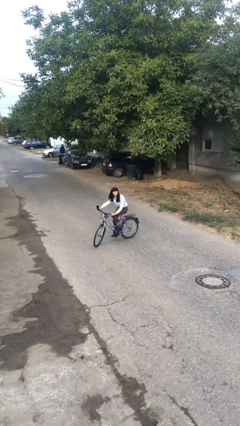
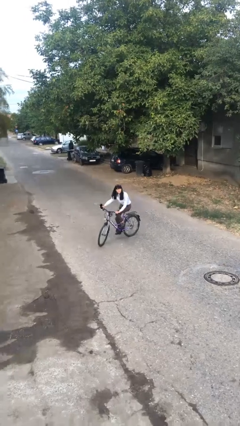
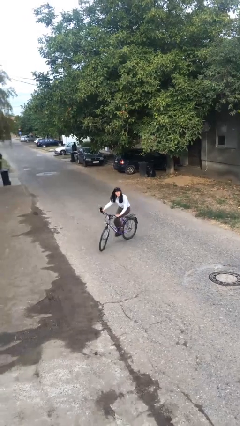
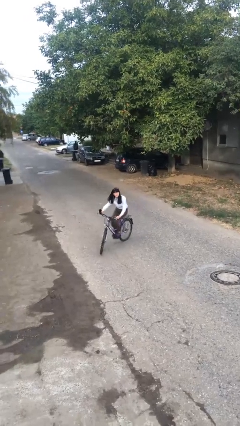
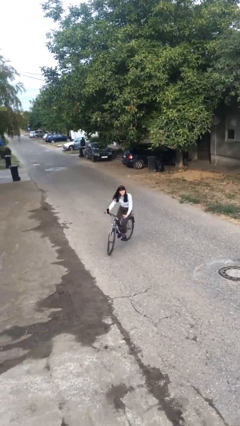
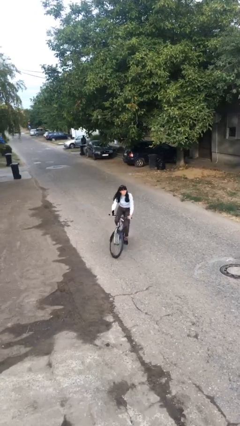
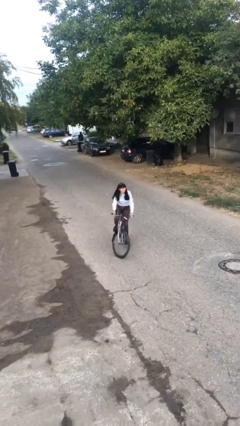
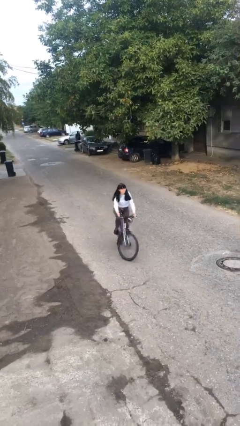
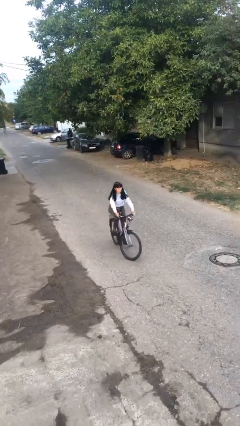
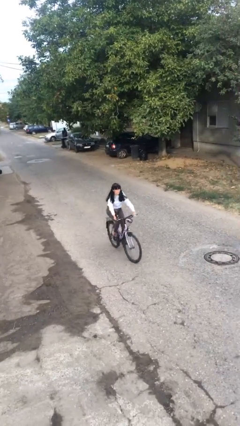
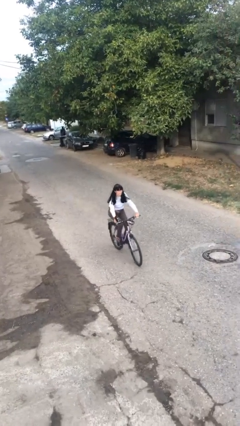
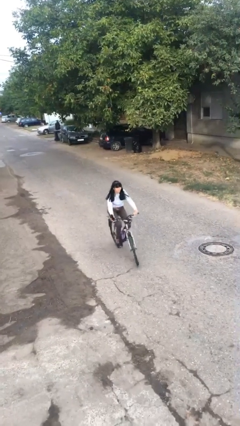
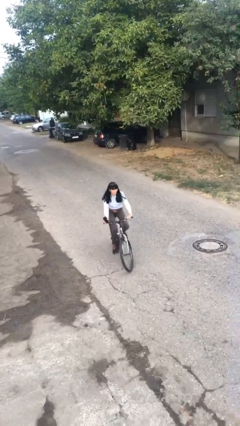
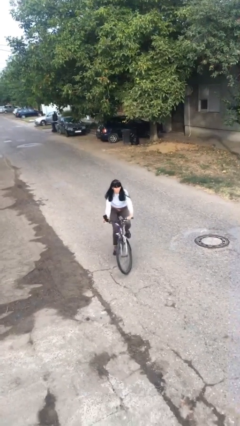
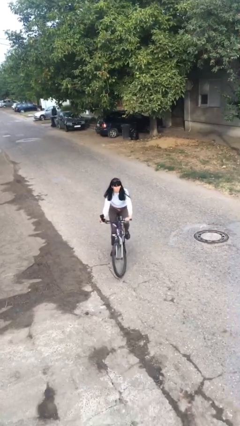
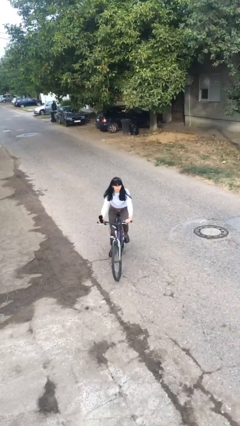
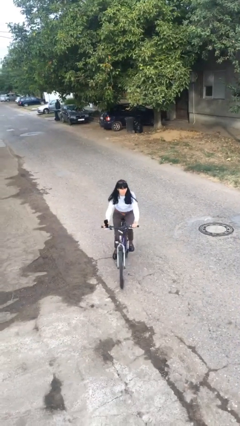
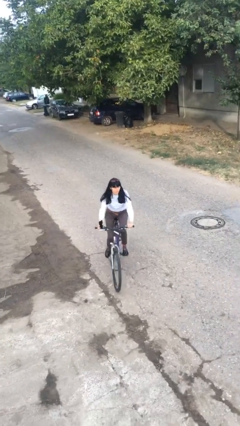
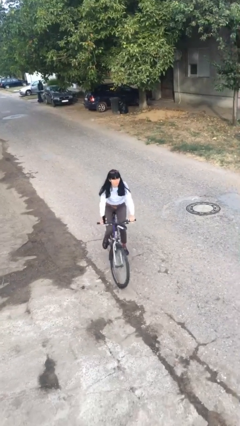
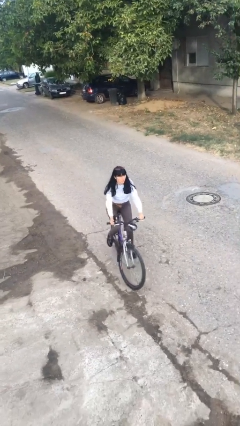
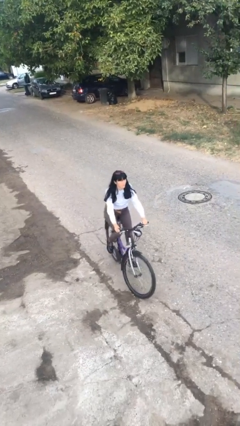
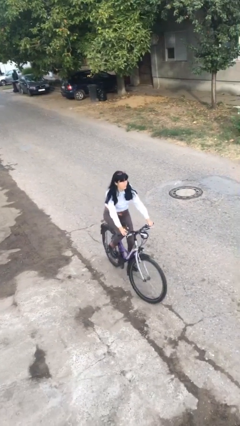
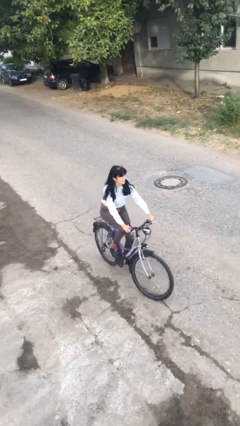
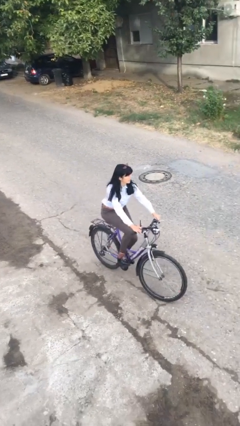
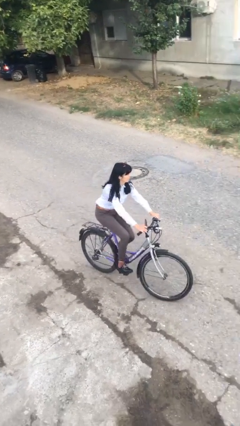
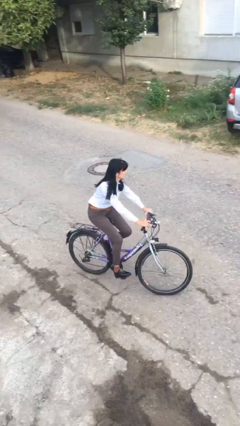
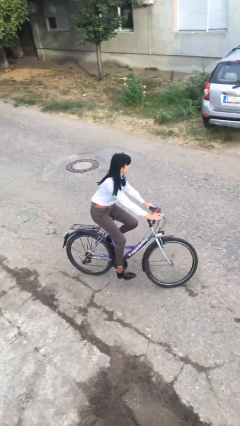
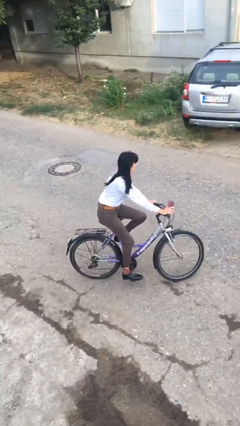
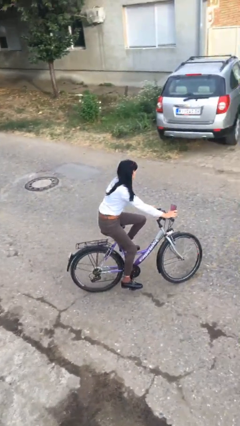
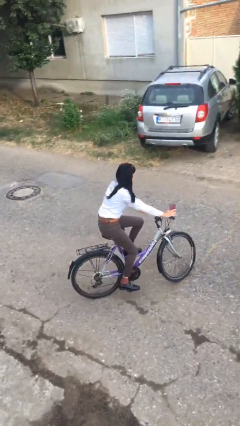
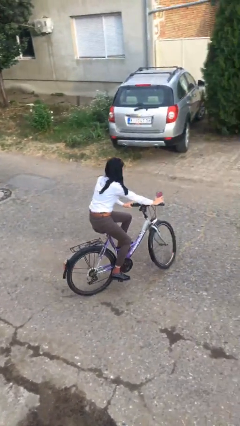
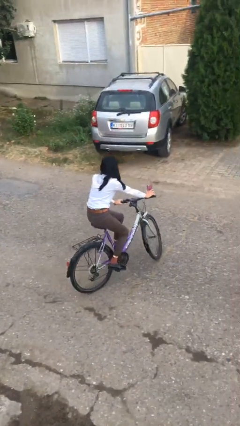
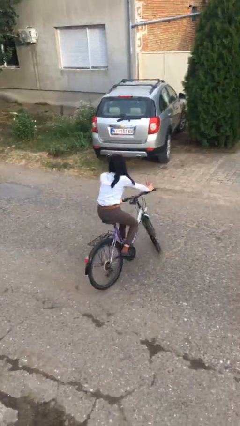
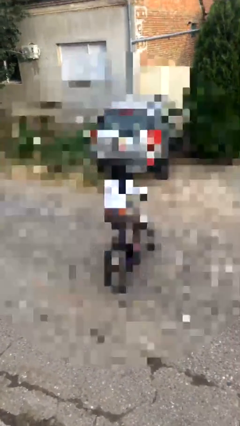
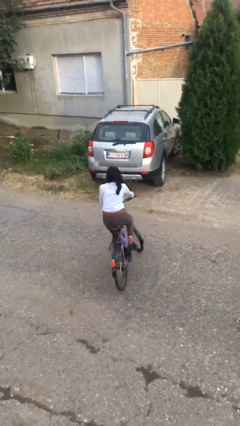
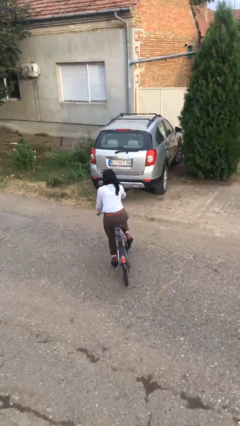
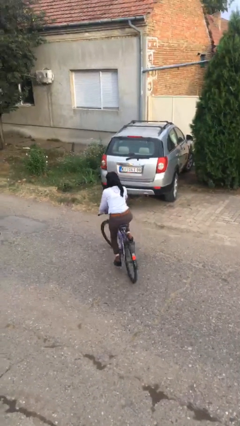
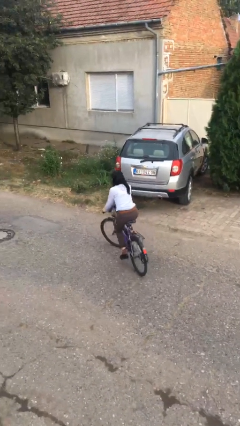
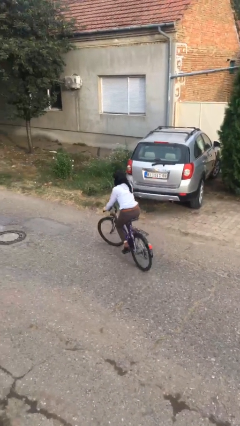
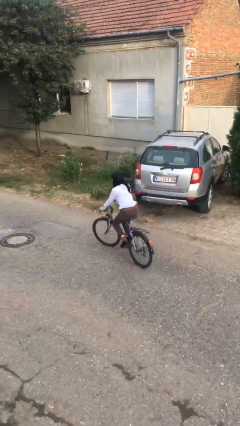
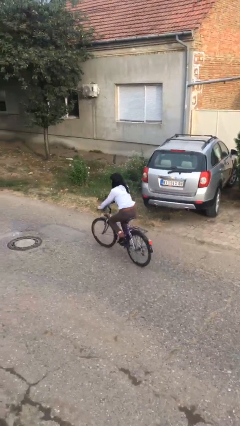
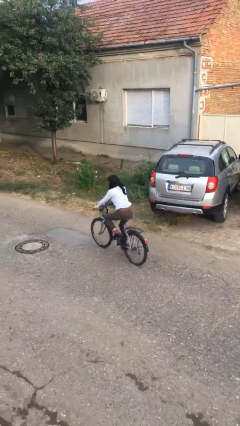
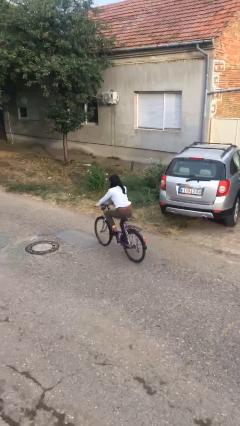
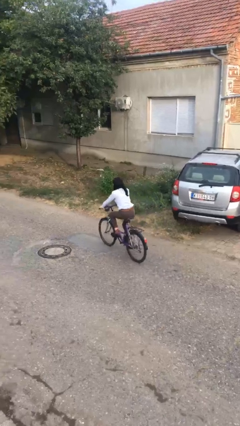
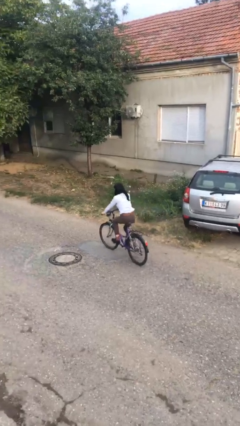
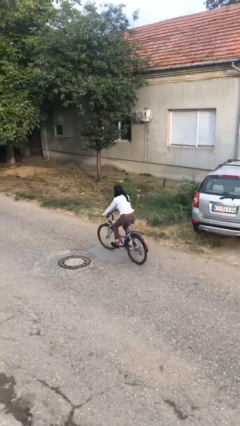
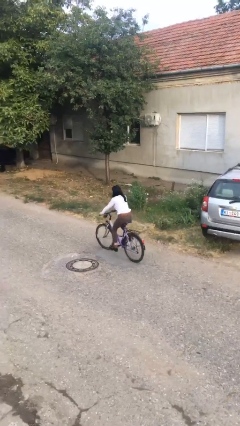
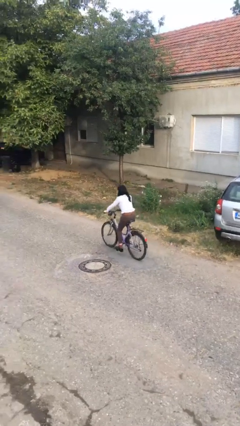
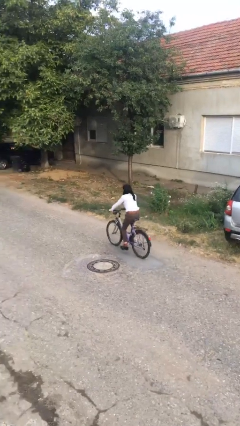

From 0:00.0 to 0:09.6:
person rides bicycle

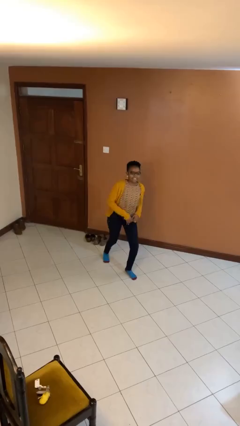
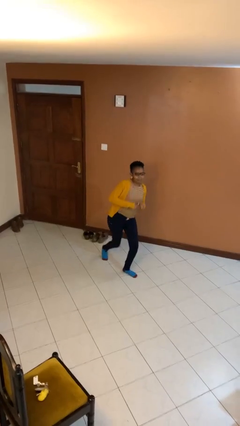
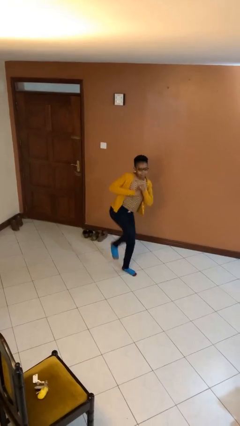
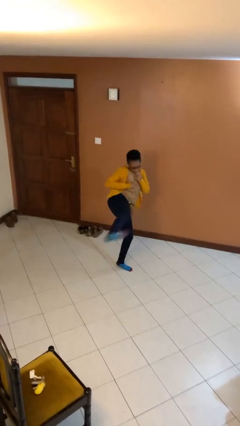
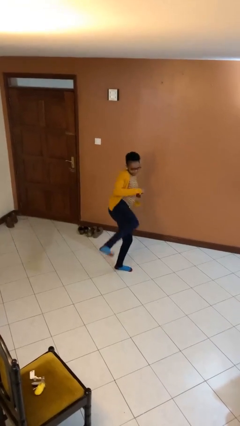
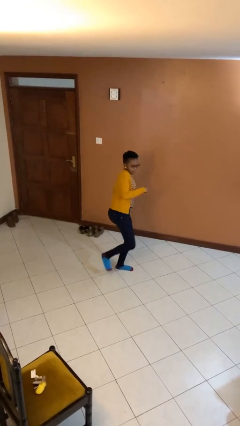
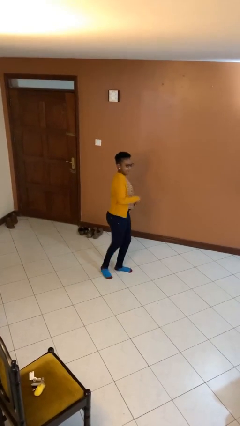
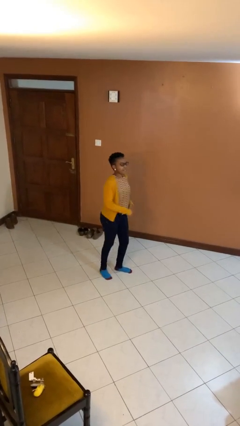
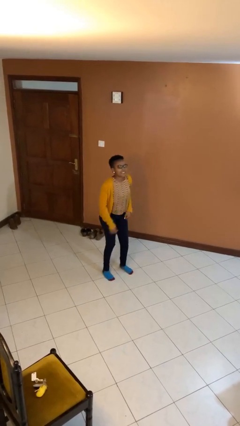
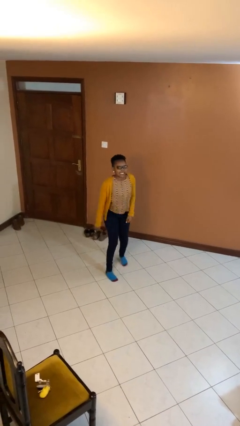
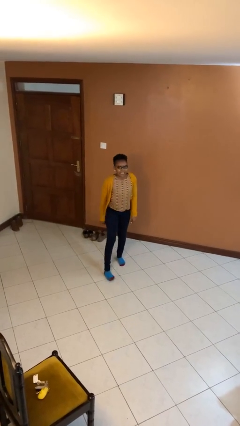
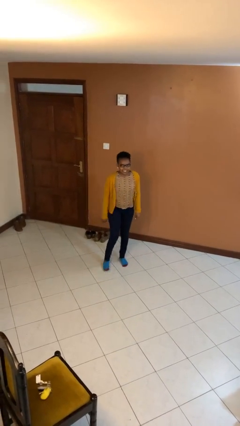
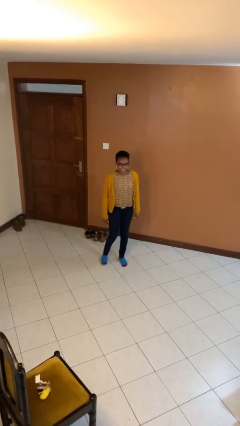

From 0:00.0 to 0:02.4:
person karate kicks

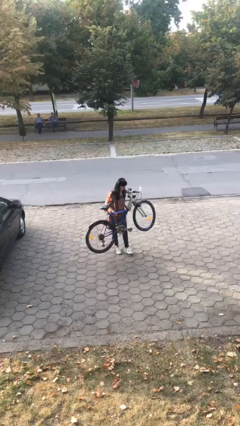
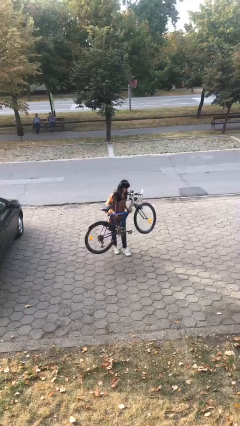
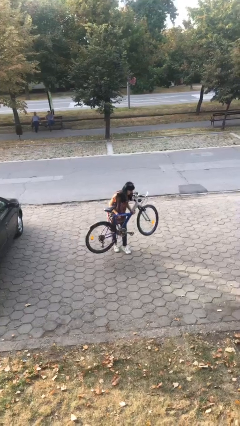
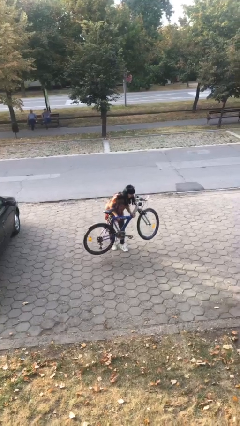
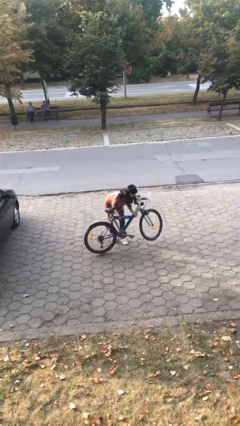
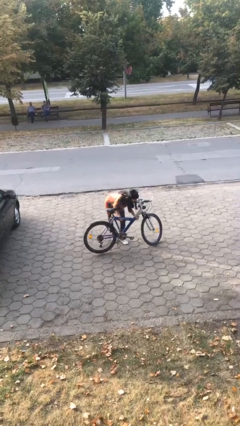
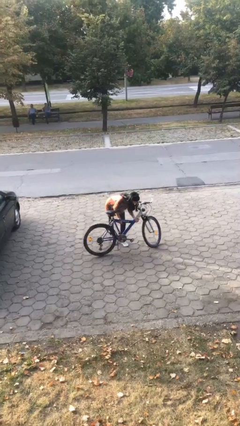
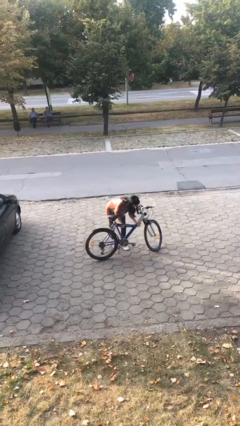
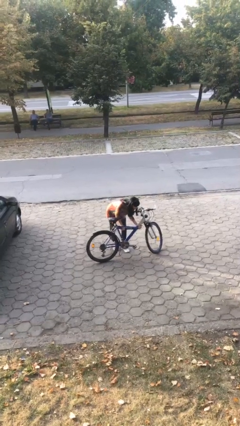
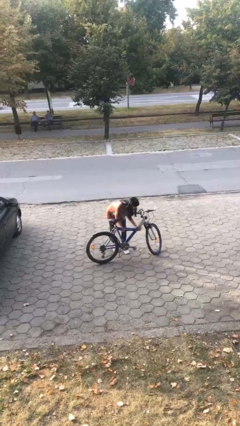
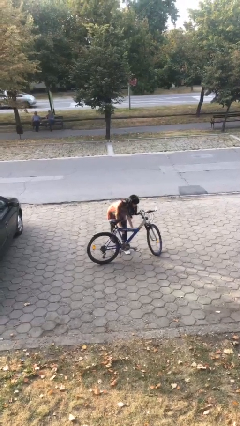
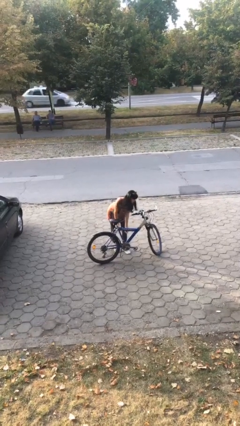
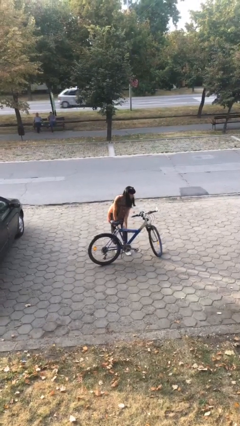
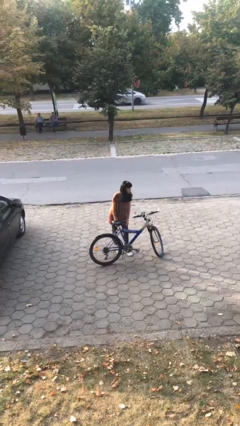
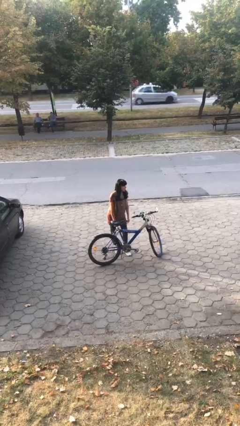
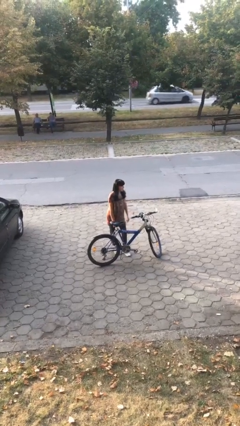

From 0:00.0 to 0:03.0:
person puts down object on floor

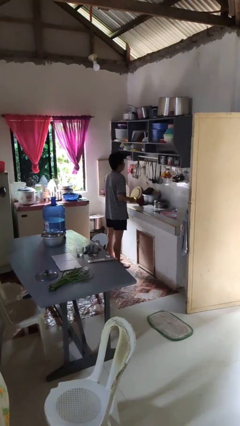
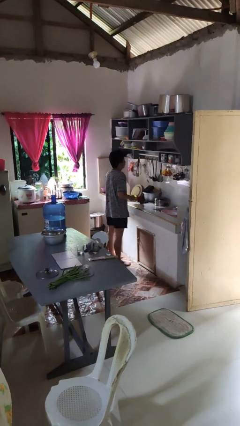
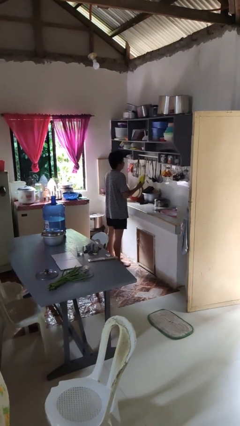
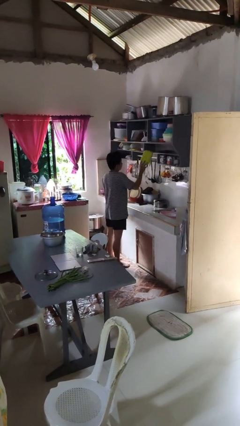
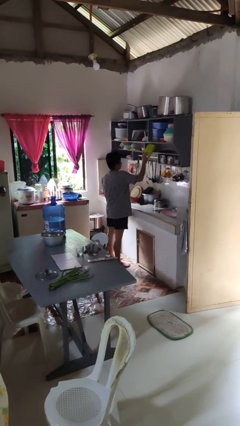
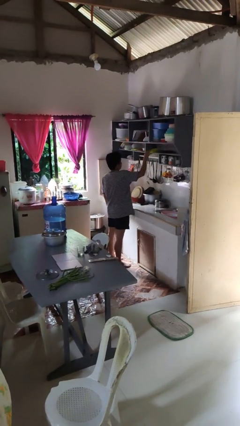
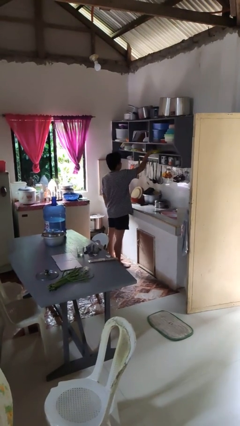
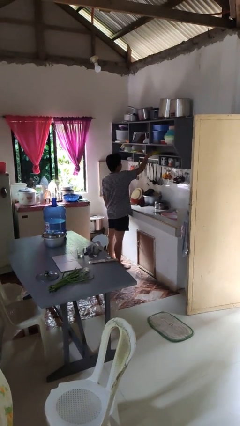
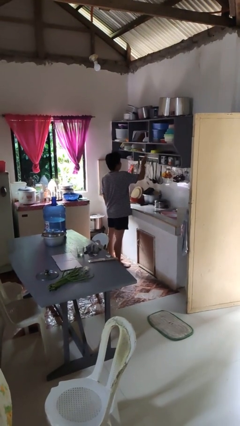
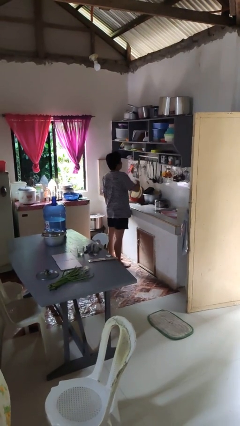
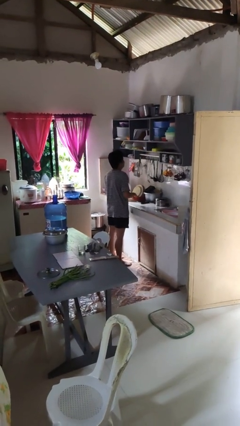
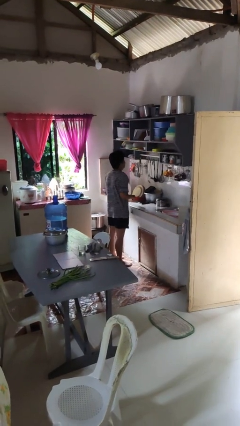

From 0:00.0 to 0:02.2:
person puts object in cabinet

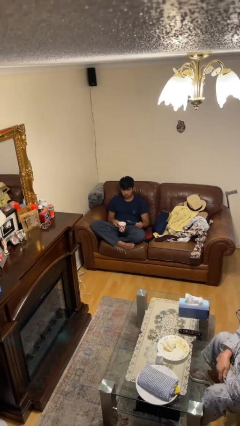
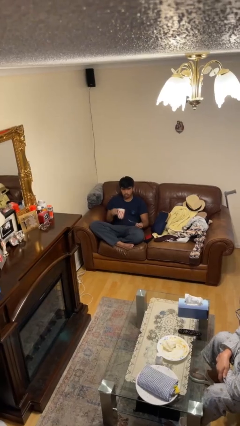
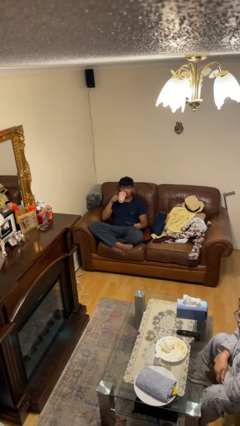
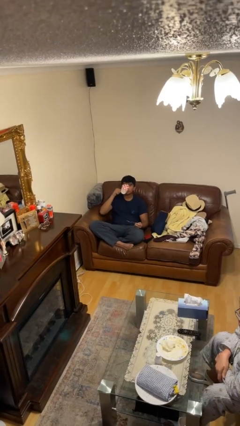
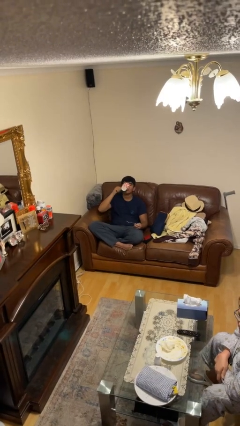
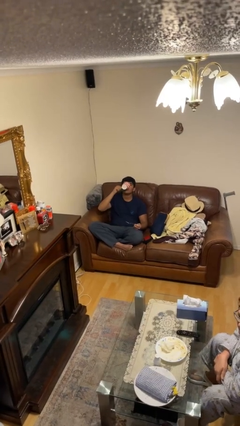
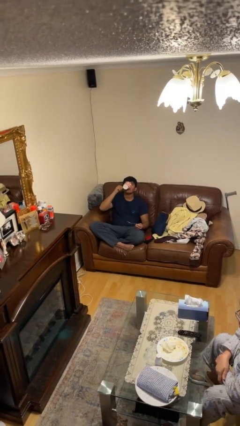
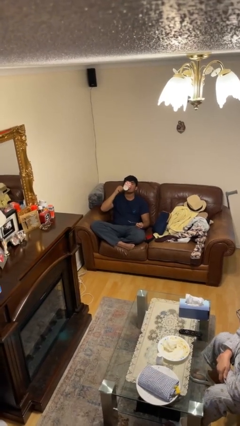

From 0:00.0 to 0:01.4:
person drinks from mug
